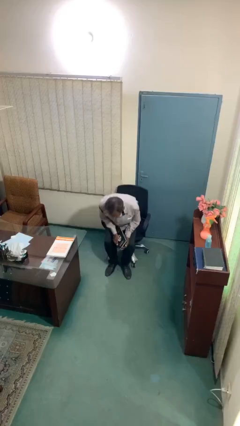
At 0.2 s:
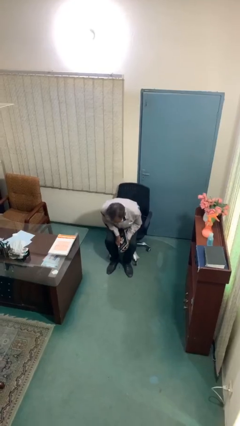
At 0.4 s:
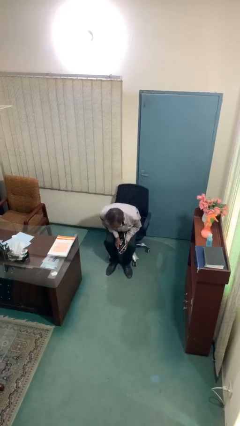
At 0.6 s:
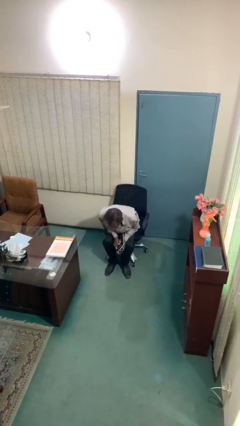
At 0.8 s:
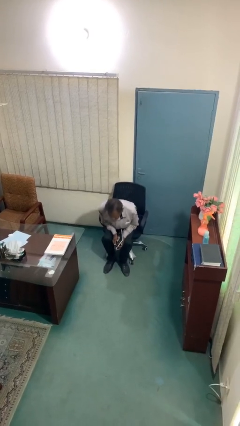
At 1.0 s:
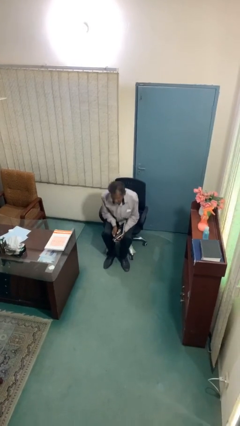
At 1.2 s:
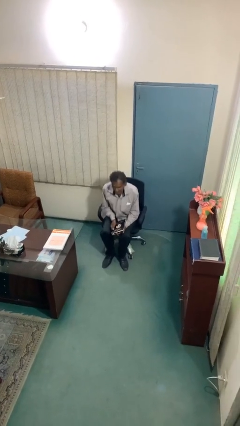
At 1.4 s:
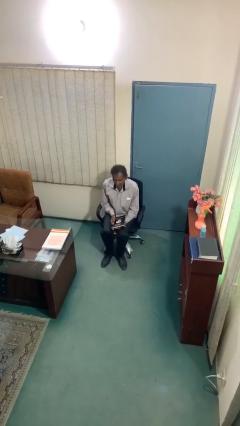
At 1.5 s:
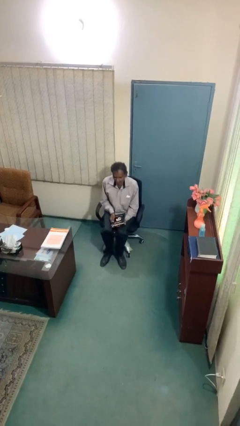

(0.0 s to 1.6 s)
person sits down

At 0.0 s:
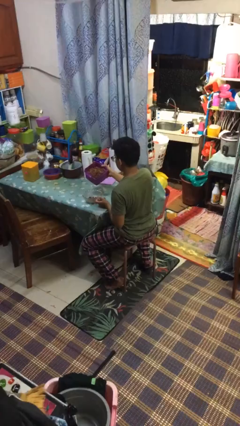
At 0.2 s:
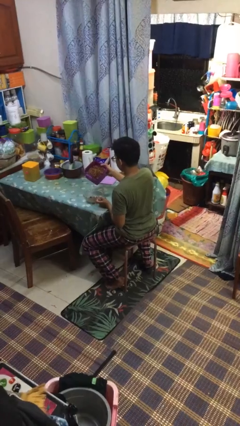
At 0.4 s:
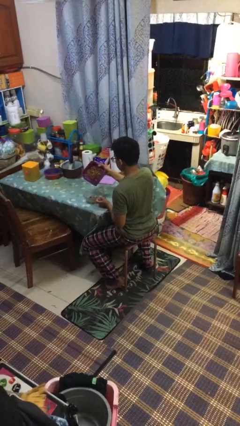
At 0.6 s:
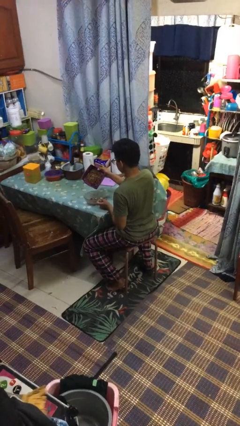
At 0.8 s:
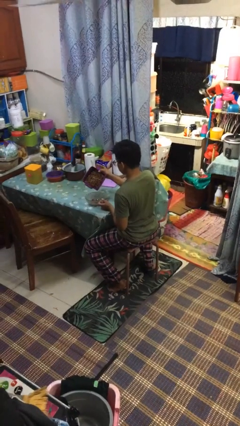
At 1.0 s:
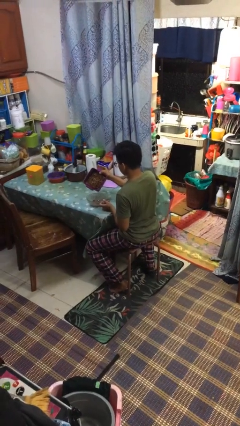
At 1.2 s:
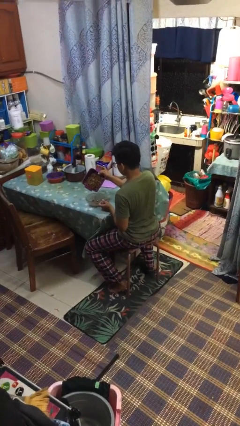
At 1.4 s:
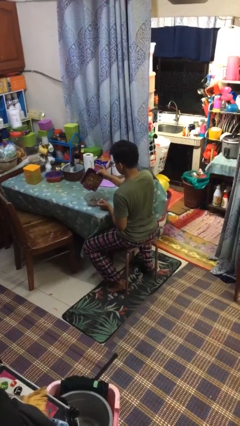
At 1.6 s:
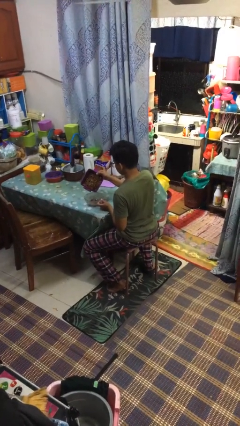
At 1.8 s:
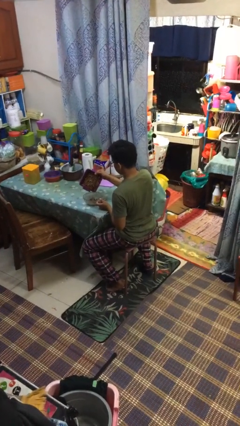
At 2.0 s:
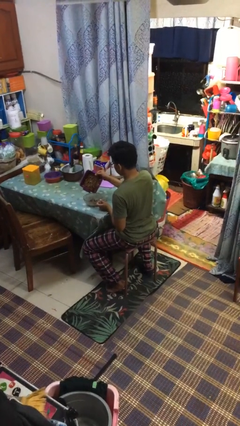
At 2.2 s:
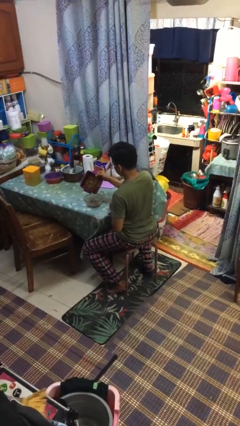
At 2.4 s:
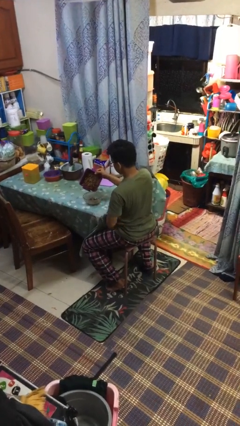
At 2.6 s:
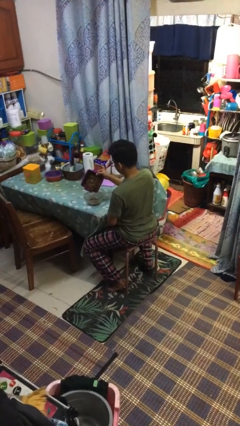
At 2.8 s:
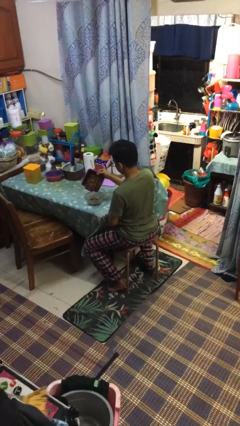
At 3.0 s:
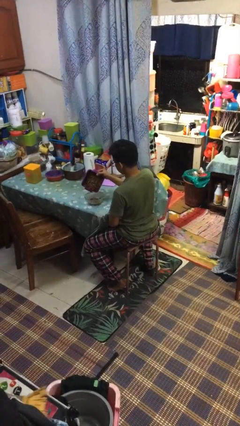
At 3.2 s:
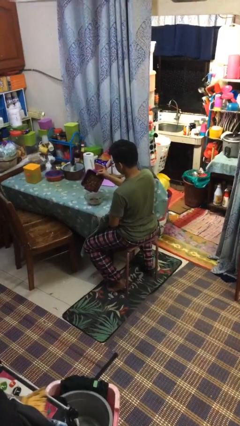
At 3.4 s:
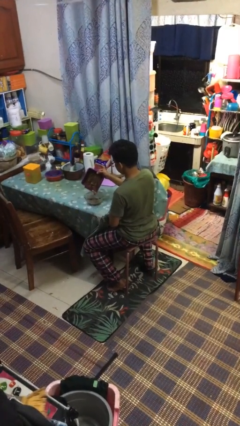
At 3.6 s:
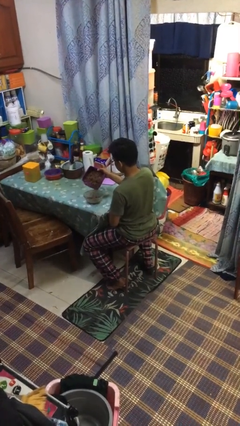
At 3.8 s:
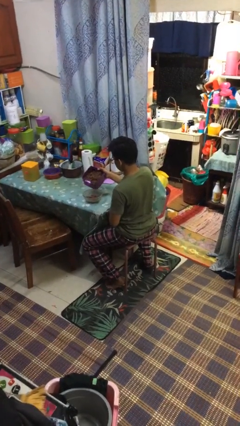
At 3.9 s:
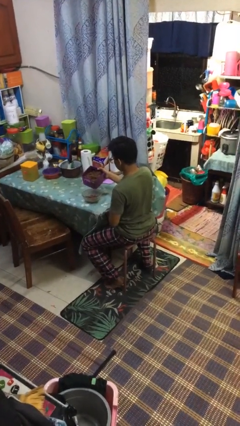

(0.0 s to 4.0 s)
person pours into bowl

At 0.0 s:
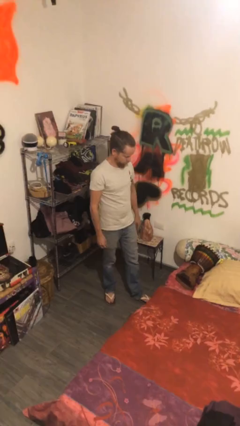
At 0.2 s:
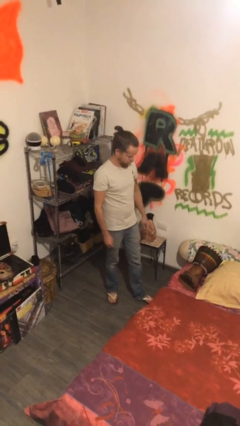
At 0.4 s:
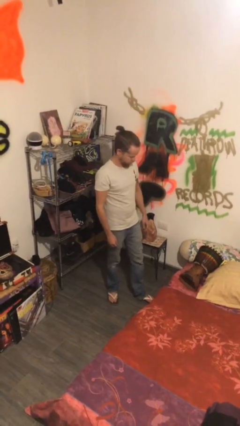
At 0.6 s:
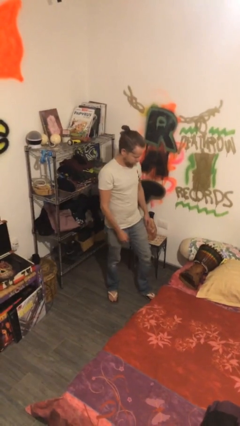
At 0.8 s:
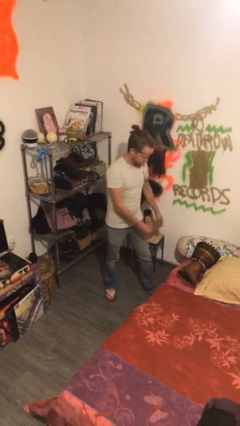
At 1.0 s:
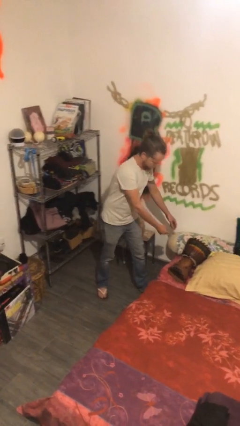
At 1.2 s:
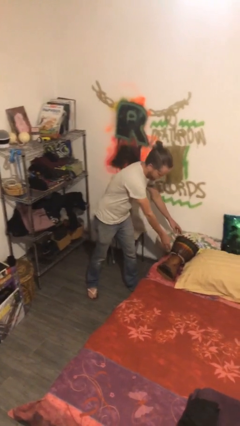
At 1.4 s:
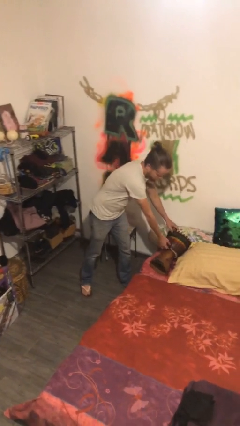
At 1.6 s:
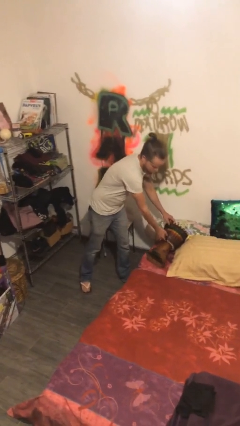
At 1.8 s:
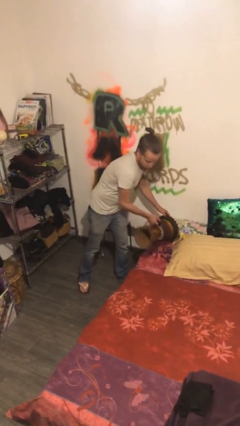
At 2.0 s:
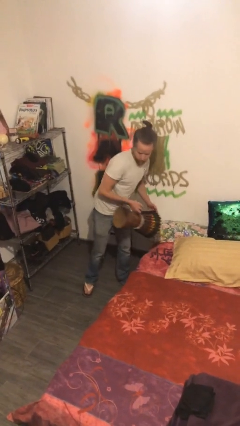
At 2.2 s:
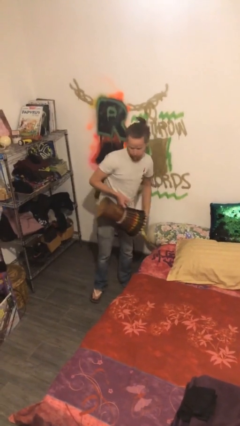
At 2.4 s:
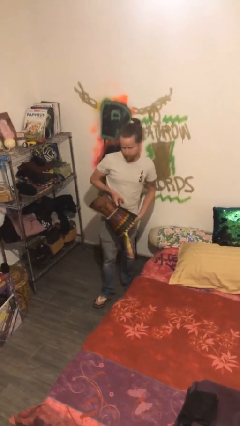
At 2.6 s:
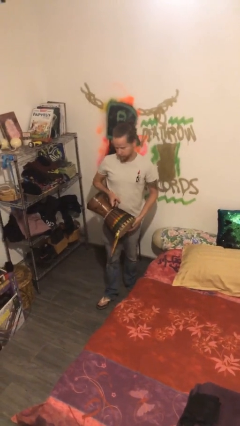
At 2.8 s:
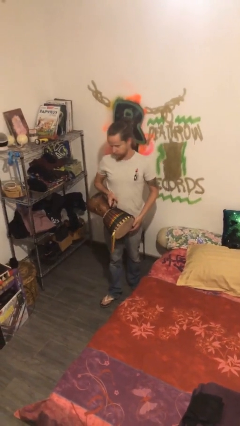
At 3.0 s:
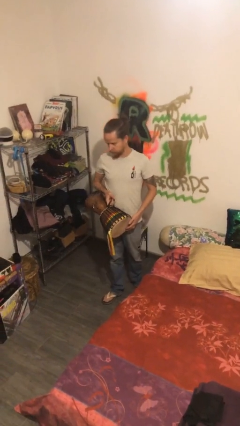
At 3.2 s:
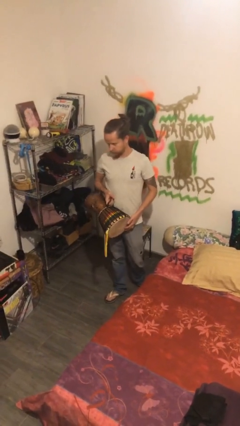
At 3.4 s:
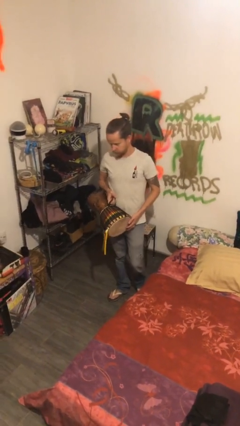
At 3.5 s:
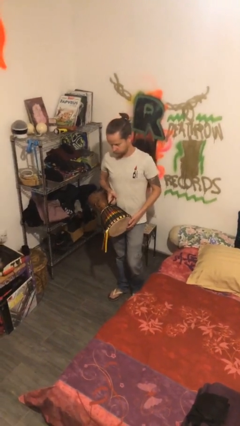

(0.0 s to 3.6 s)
person picks up object from bed

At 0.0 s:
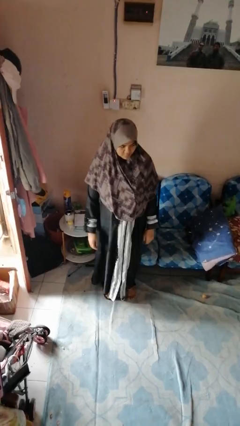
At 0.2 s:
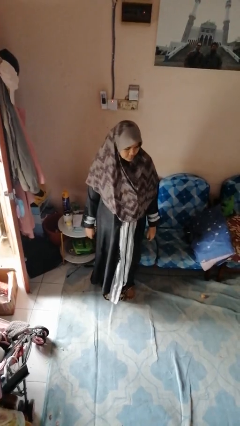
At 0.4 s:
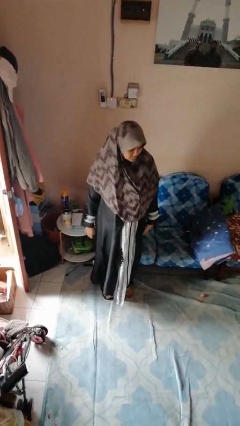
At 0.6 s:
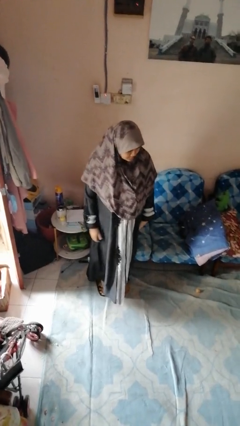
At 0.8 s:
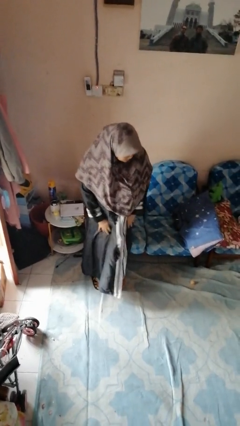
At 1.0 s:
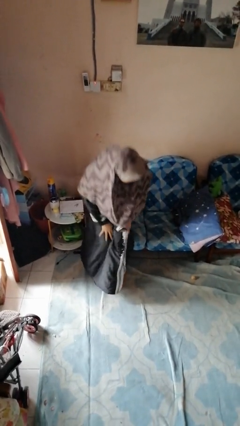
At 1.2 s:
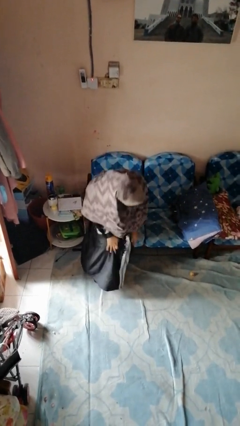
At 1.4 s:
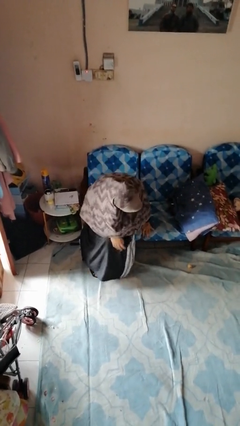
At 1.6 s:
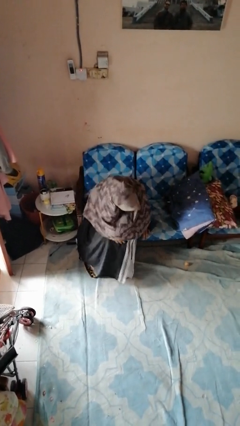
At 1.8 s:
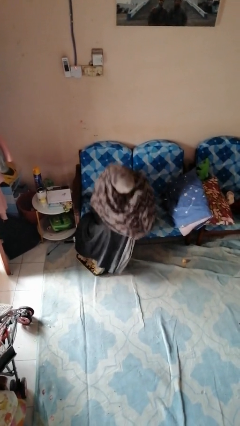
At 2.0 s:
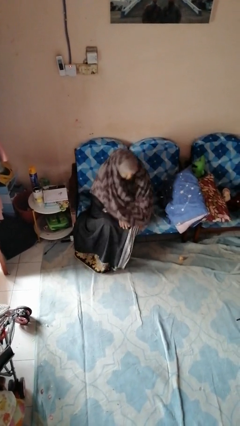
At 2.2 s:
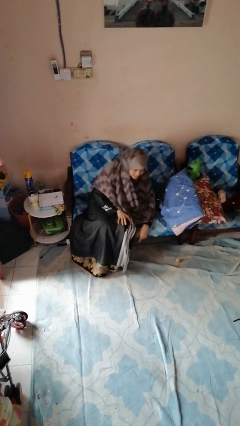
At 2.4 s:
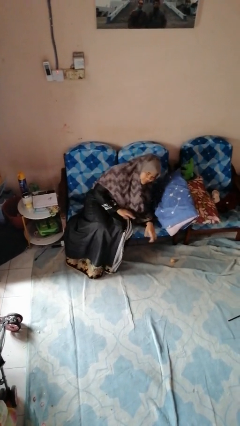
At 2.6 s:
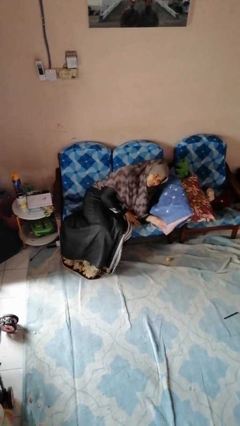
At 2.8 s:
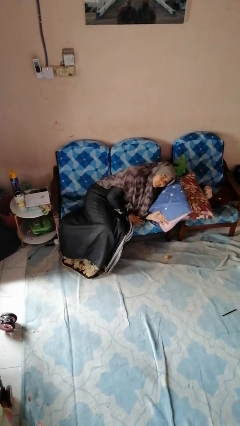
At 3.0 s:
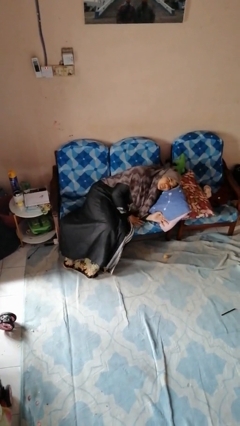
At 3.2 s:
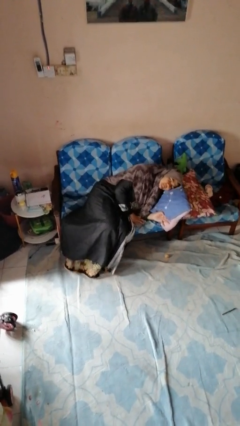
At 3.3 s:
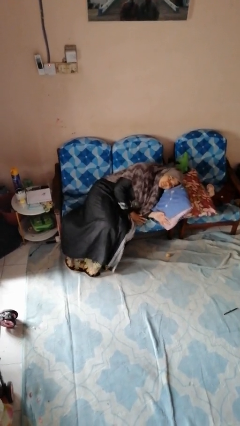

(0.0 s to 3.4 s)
person lies down on couch

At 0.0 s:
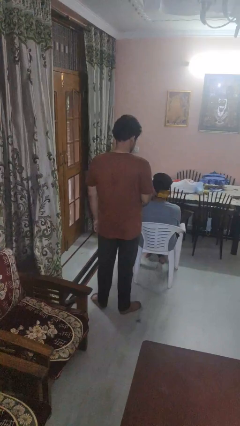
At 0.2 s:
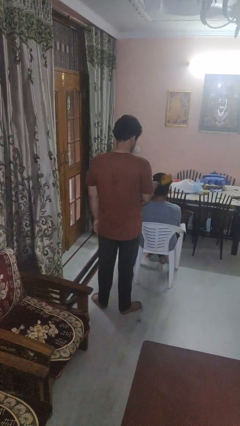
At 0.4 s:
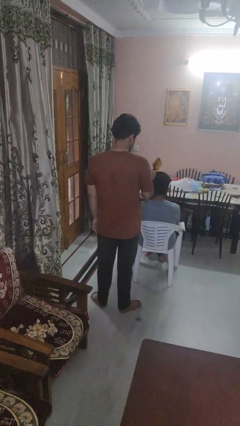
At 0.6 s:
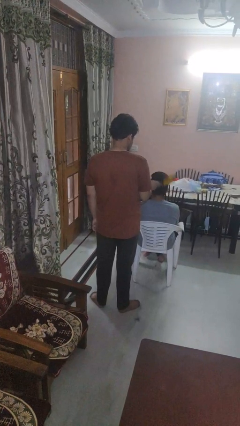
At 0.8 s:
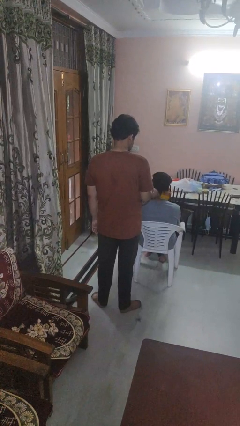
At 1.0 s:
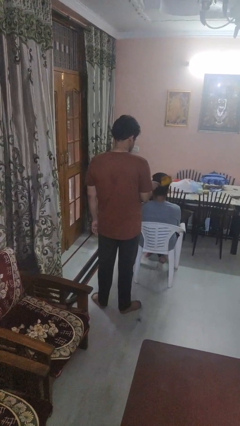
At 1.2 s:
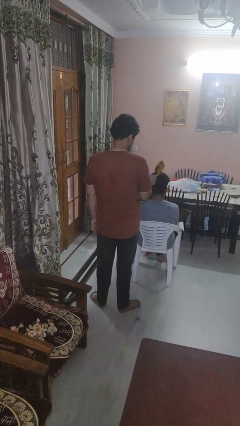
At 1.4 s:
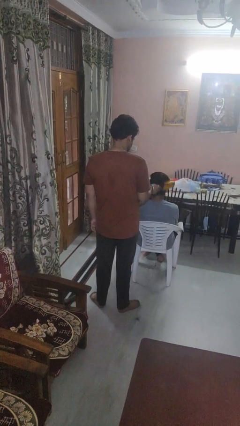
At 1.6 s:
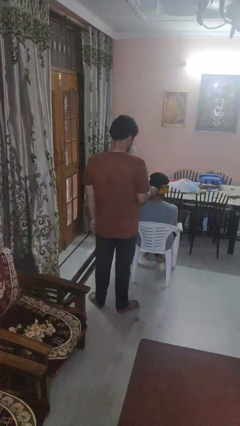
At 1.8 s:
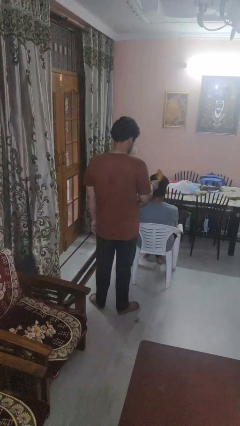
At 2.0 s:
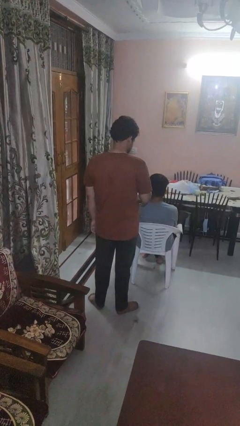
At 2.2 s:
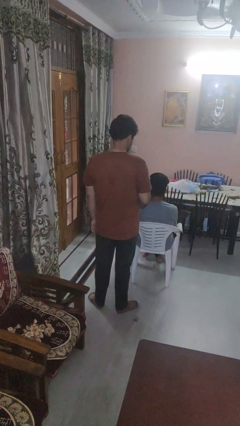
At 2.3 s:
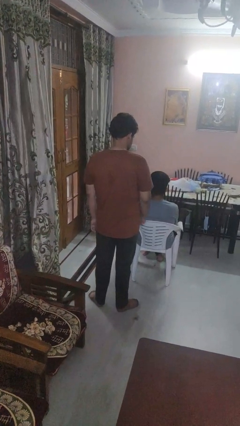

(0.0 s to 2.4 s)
person brushes hair of person

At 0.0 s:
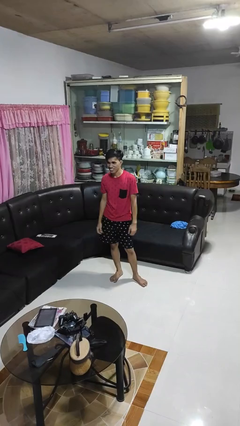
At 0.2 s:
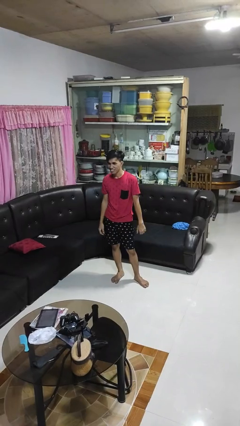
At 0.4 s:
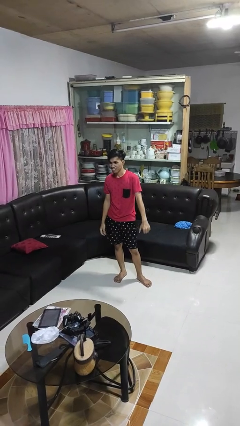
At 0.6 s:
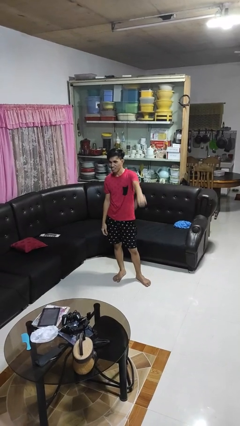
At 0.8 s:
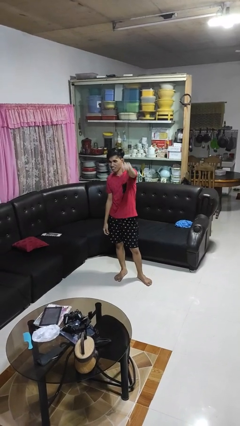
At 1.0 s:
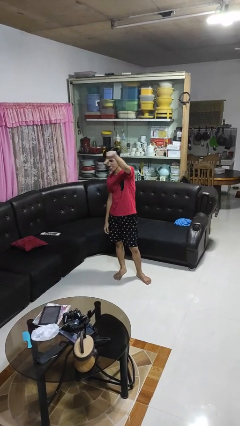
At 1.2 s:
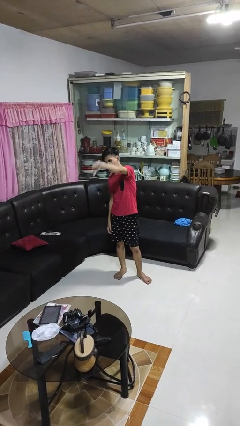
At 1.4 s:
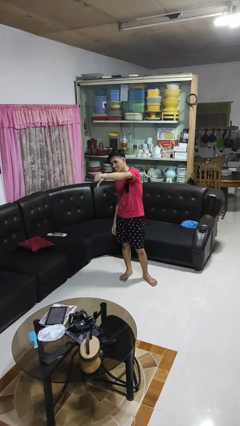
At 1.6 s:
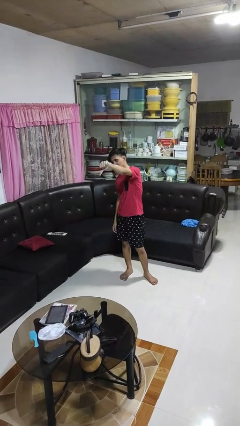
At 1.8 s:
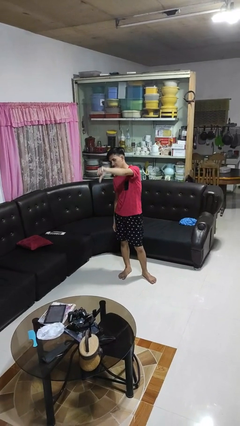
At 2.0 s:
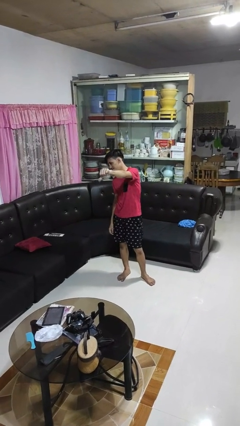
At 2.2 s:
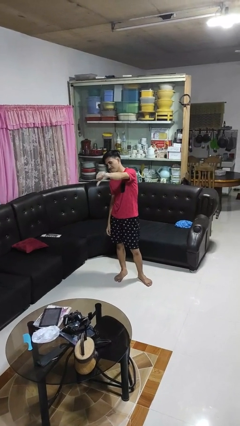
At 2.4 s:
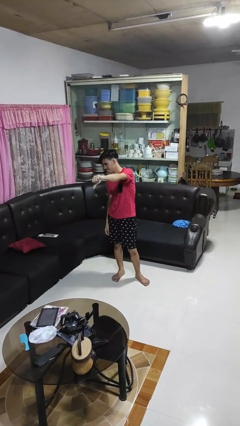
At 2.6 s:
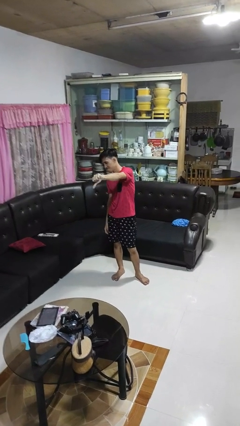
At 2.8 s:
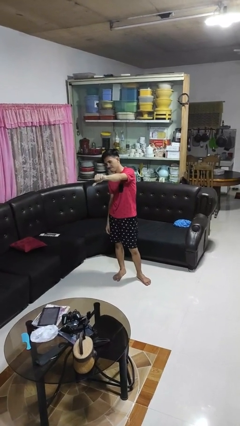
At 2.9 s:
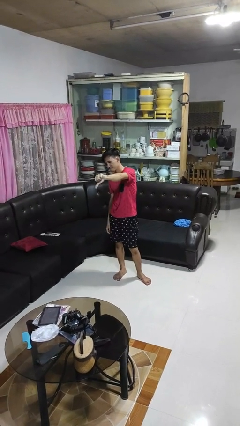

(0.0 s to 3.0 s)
person gestures thumbs down
